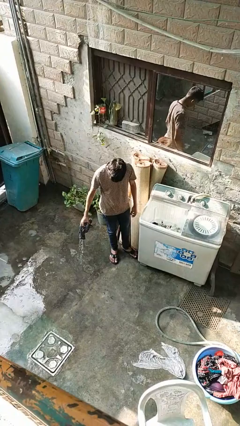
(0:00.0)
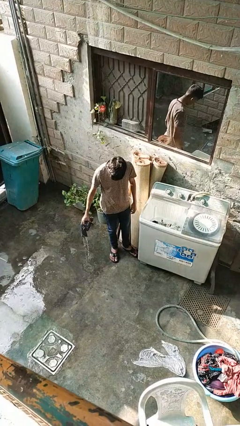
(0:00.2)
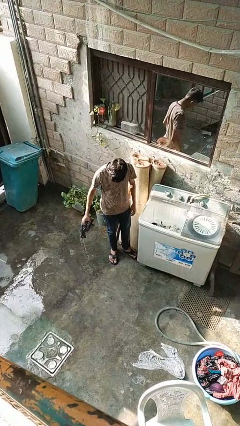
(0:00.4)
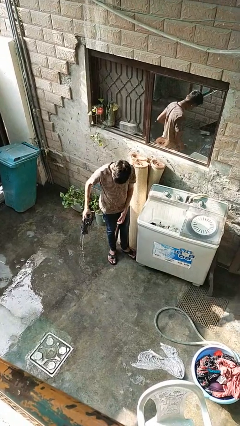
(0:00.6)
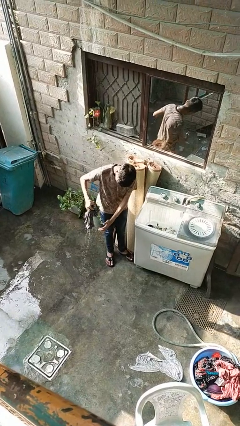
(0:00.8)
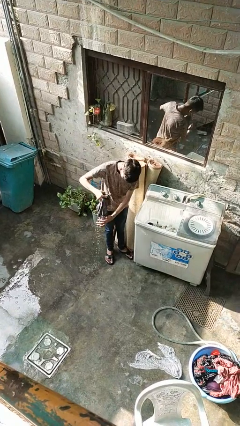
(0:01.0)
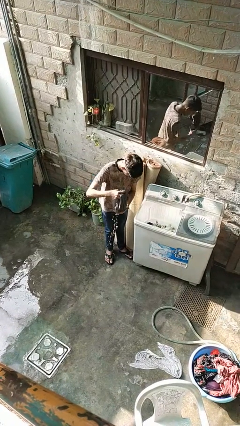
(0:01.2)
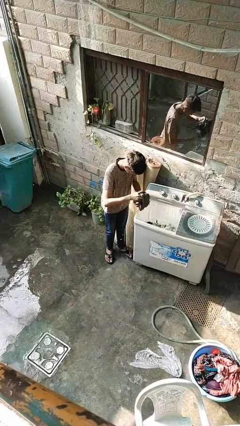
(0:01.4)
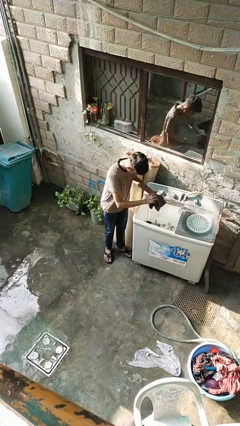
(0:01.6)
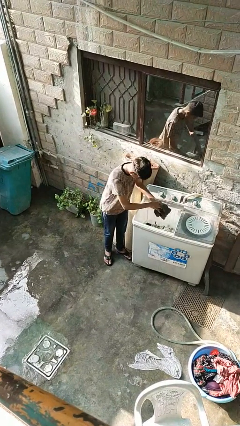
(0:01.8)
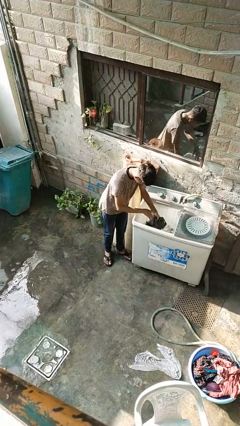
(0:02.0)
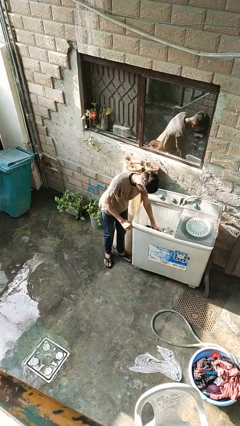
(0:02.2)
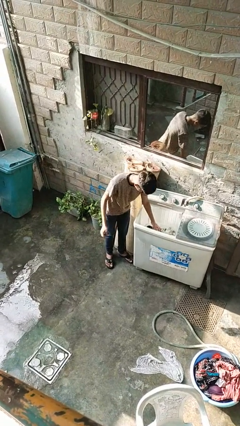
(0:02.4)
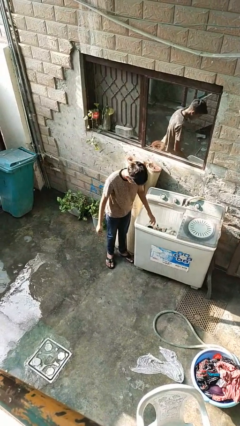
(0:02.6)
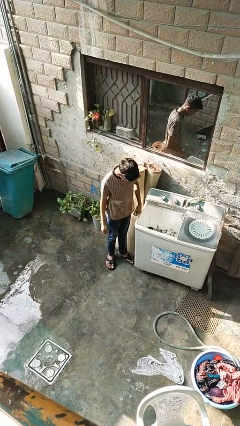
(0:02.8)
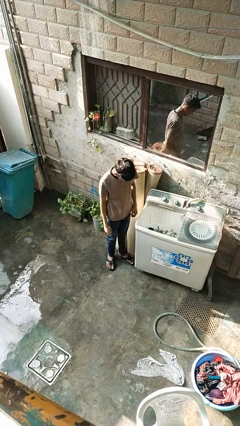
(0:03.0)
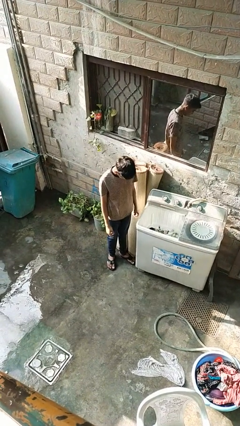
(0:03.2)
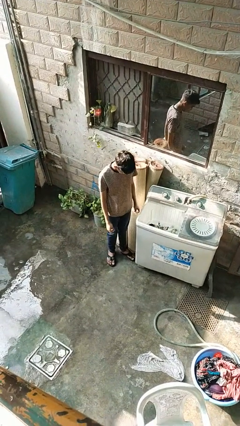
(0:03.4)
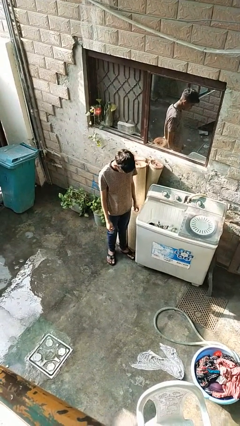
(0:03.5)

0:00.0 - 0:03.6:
person loads clotheswasher

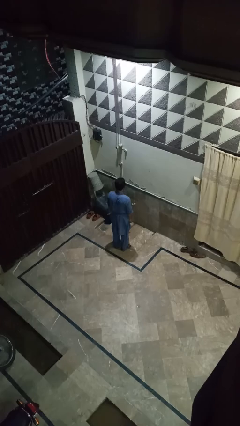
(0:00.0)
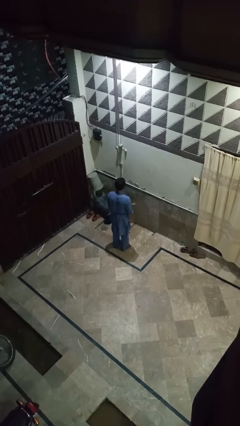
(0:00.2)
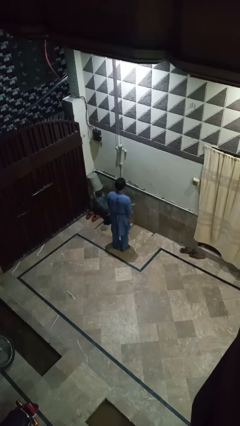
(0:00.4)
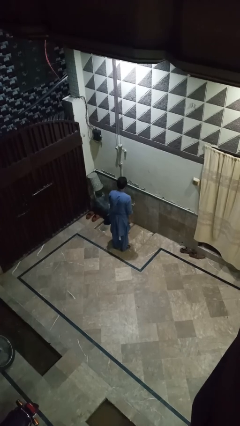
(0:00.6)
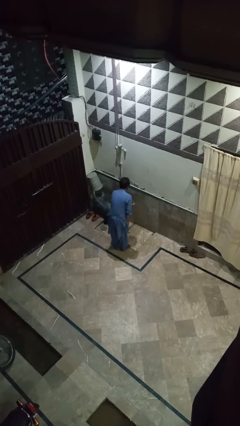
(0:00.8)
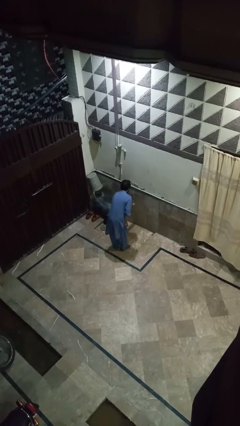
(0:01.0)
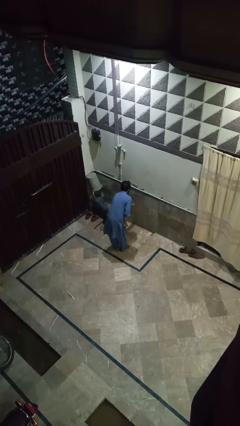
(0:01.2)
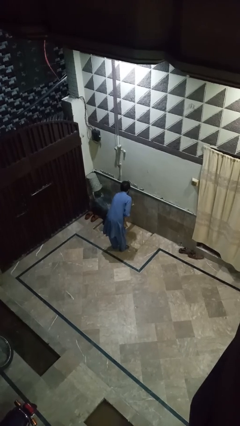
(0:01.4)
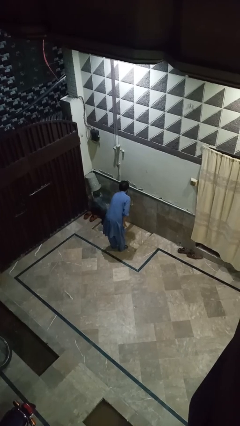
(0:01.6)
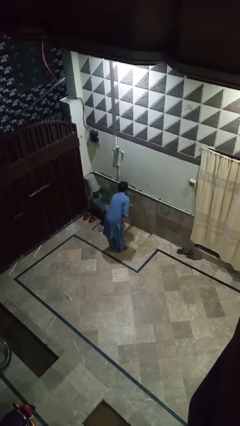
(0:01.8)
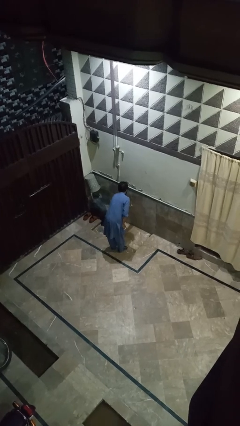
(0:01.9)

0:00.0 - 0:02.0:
person turns on faucet

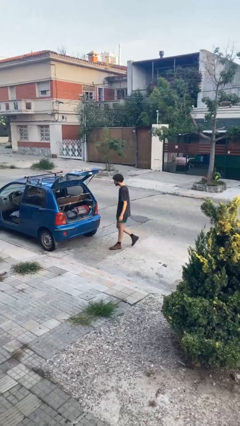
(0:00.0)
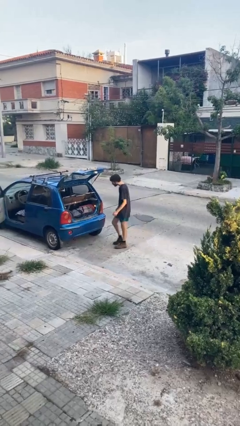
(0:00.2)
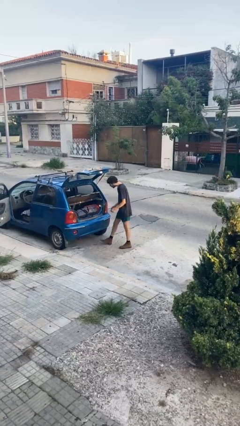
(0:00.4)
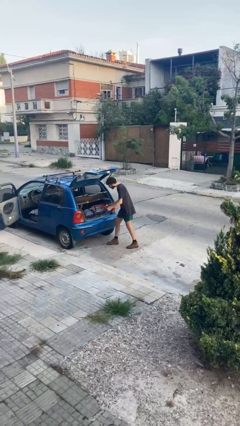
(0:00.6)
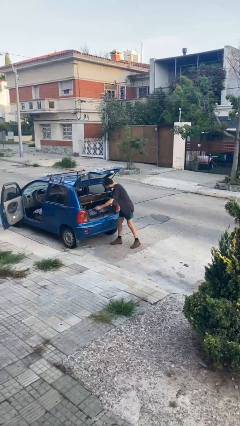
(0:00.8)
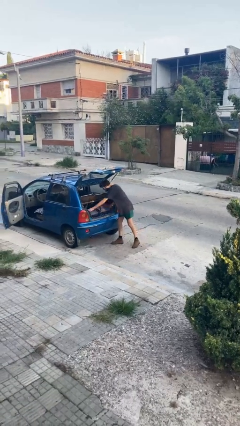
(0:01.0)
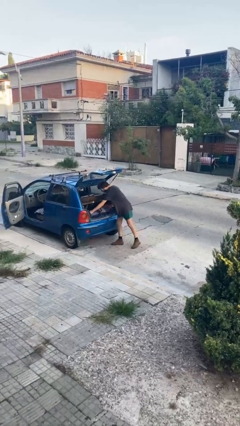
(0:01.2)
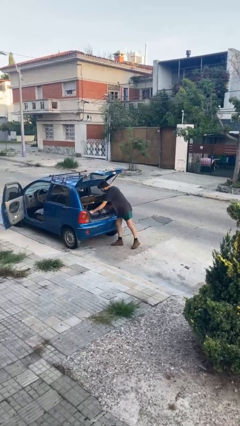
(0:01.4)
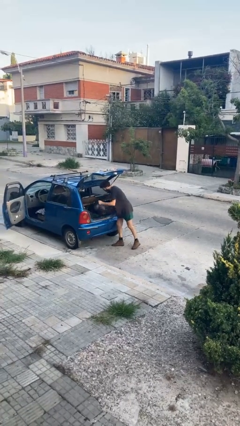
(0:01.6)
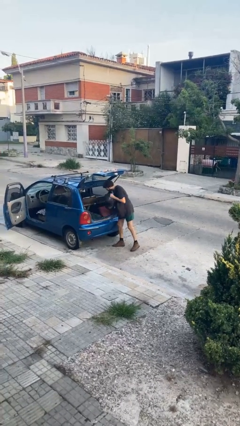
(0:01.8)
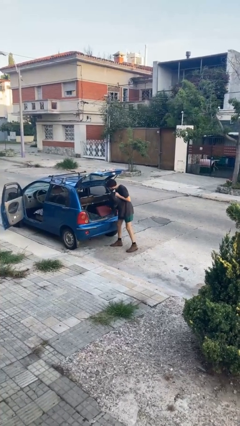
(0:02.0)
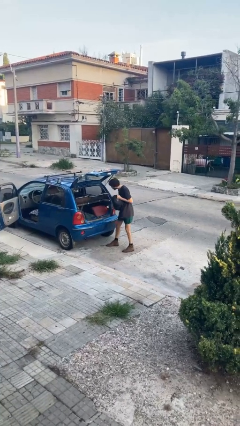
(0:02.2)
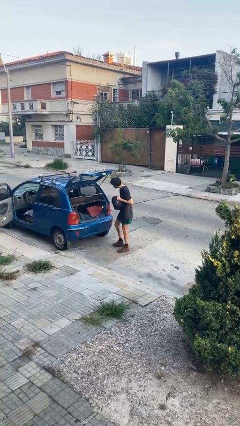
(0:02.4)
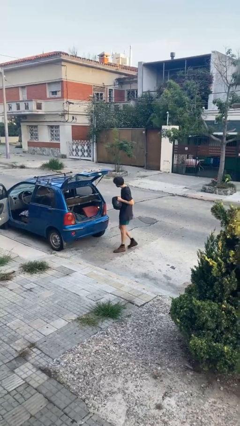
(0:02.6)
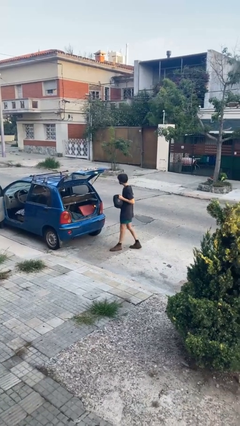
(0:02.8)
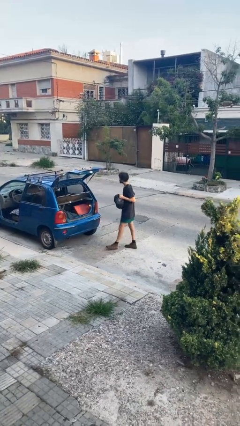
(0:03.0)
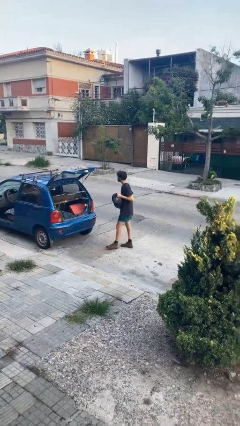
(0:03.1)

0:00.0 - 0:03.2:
person unloads car

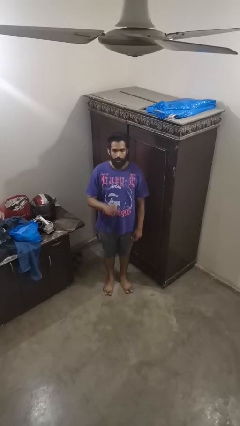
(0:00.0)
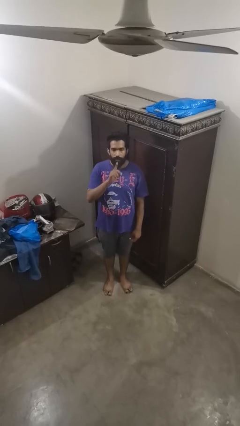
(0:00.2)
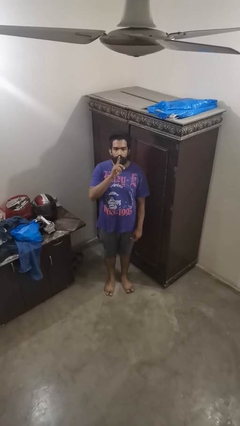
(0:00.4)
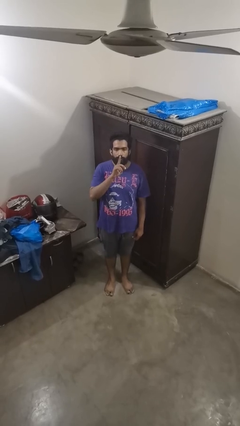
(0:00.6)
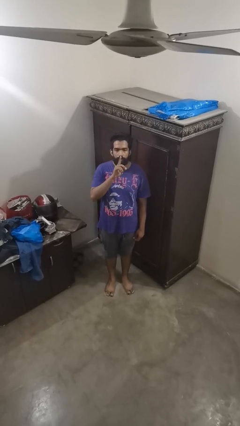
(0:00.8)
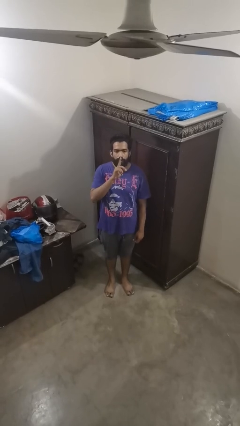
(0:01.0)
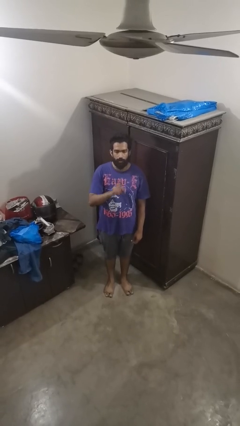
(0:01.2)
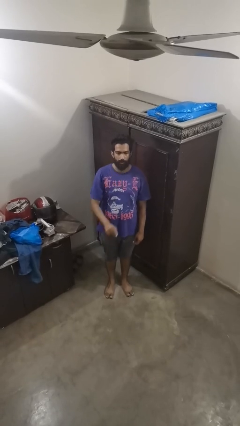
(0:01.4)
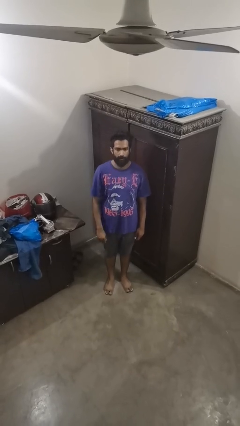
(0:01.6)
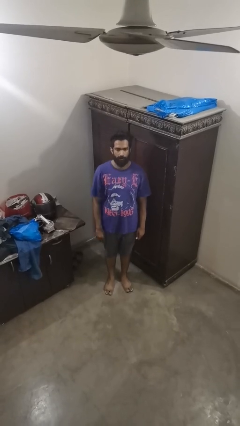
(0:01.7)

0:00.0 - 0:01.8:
person gestures be quiet

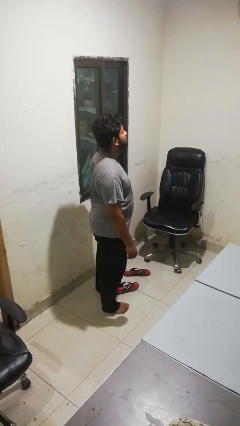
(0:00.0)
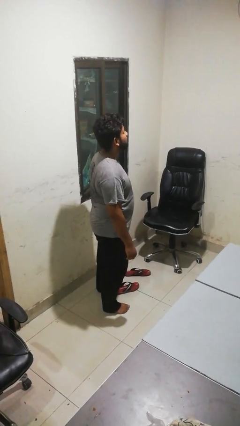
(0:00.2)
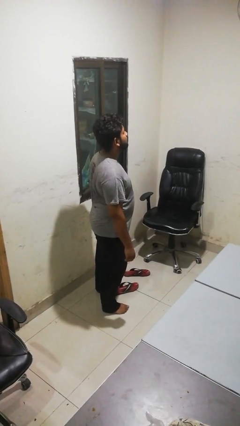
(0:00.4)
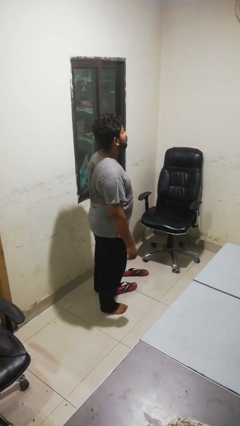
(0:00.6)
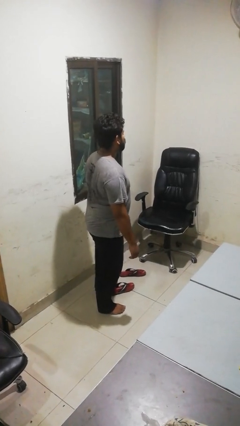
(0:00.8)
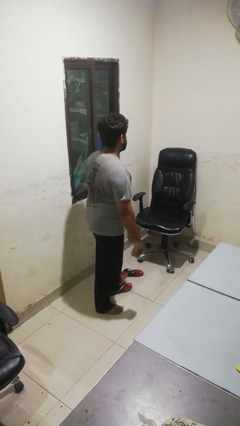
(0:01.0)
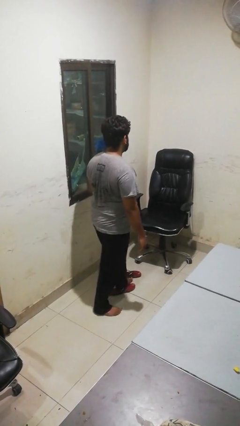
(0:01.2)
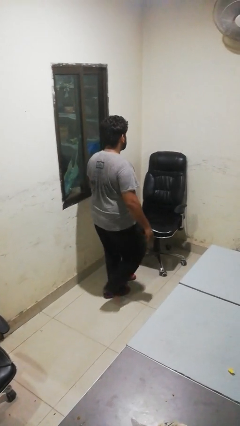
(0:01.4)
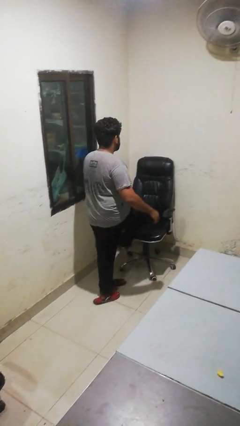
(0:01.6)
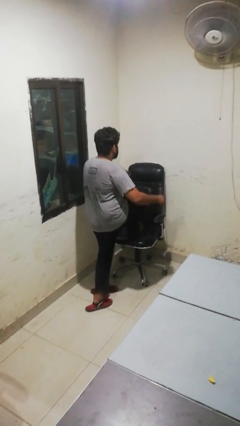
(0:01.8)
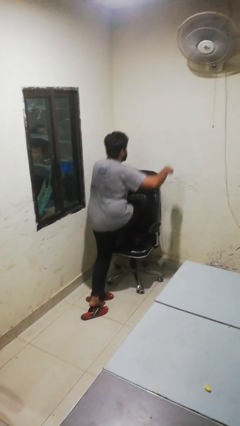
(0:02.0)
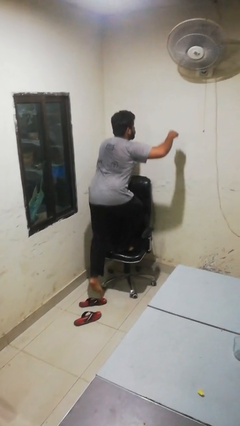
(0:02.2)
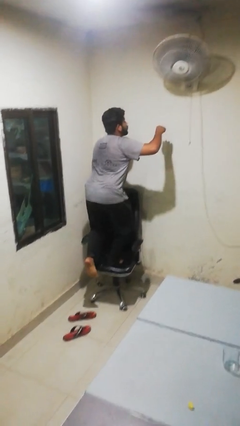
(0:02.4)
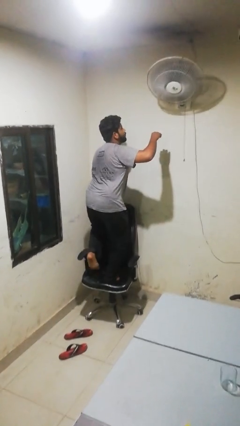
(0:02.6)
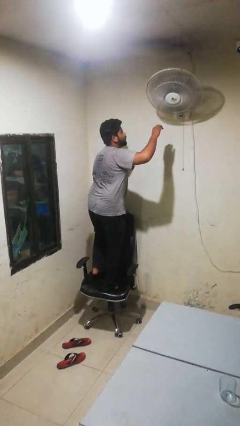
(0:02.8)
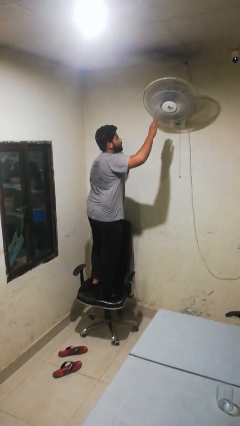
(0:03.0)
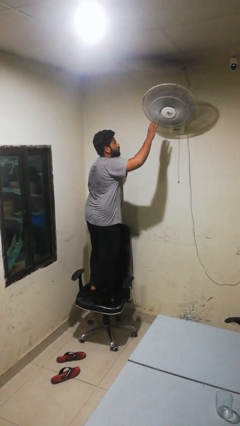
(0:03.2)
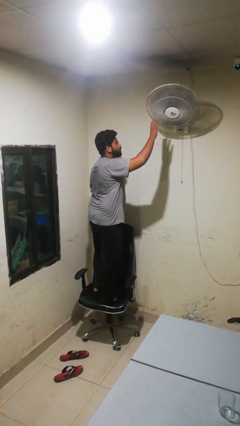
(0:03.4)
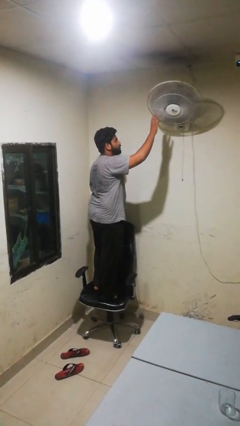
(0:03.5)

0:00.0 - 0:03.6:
person climbs on chair

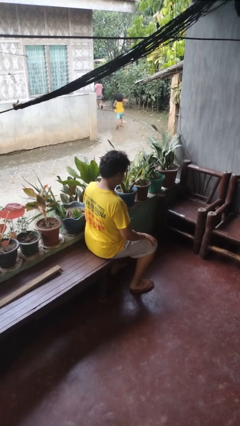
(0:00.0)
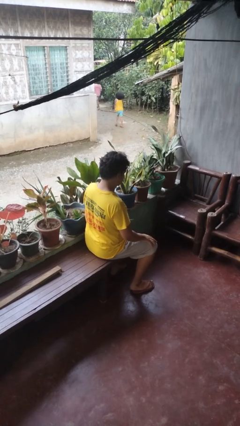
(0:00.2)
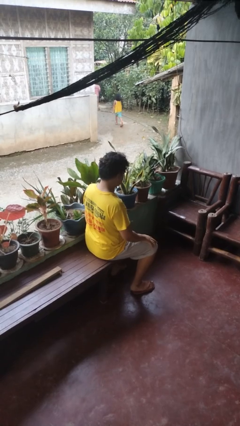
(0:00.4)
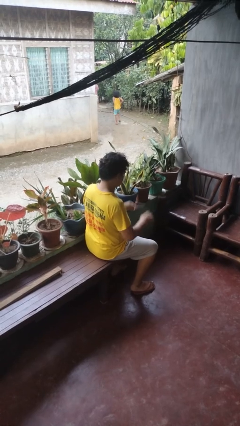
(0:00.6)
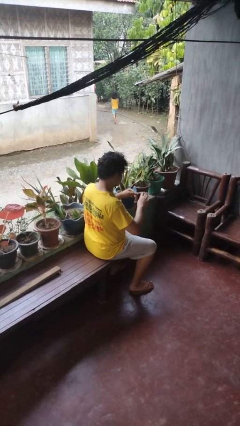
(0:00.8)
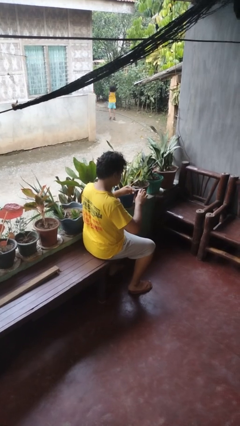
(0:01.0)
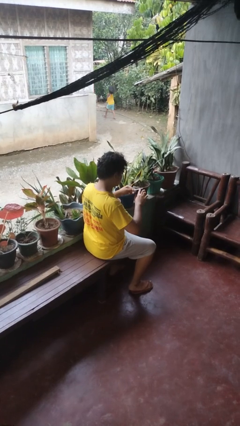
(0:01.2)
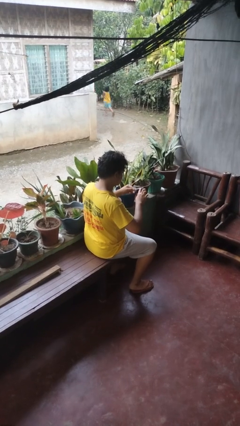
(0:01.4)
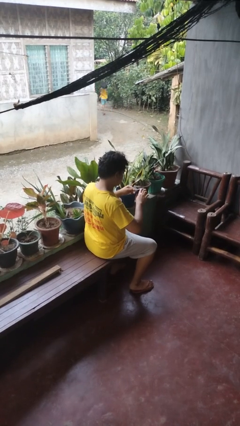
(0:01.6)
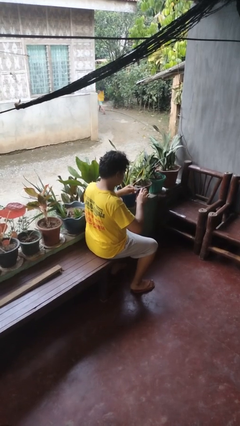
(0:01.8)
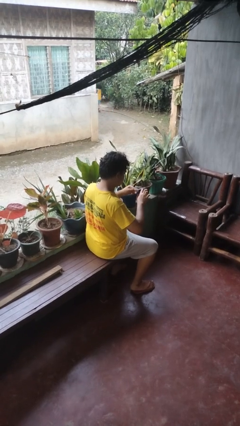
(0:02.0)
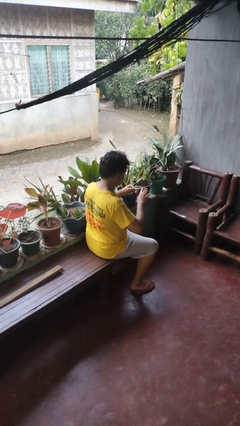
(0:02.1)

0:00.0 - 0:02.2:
person files fingernails

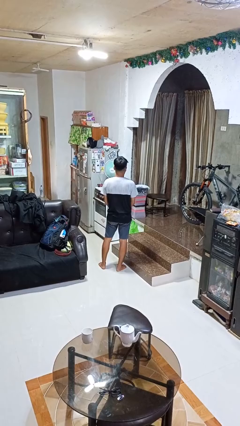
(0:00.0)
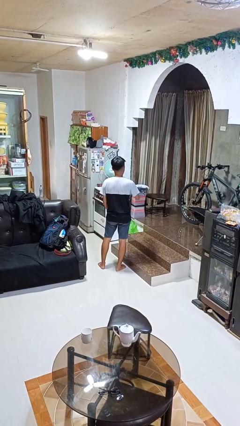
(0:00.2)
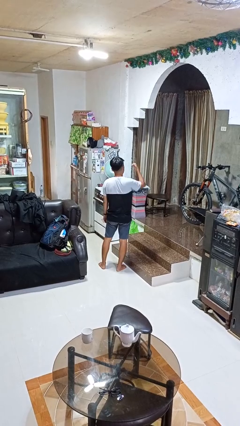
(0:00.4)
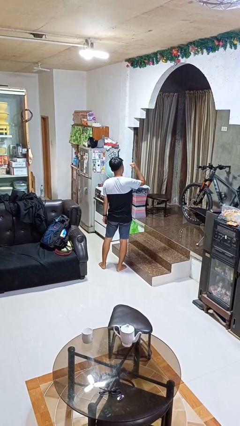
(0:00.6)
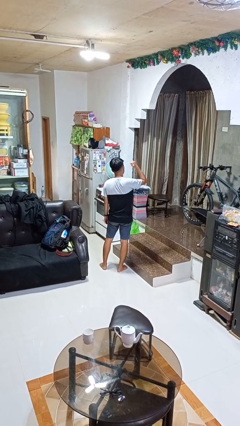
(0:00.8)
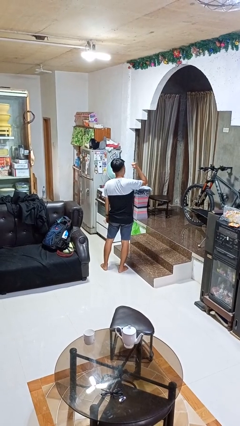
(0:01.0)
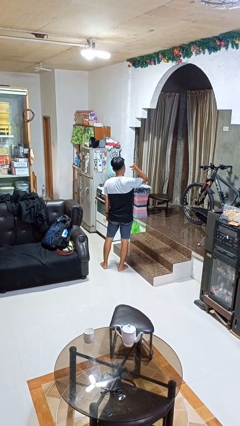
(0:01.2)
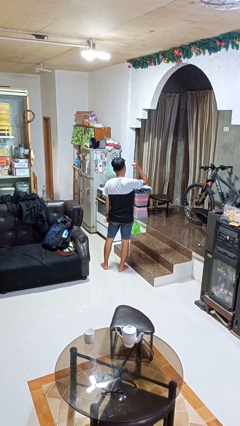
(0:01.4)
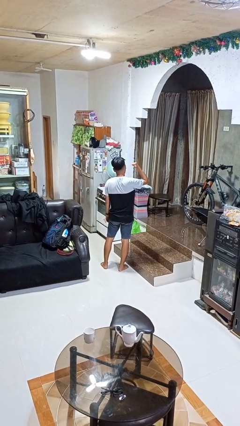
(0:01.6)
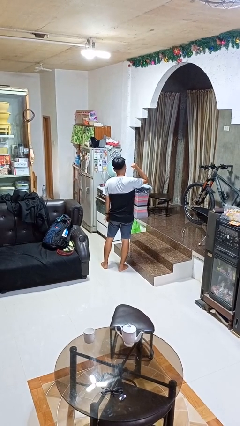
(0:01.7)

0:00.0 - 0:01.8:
person gestures behind me
